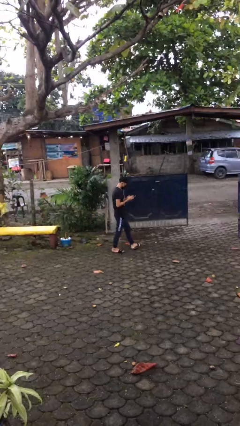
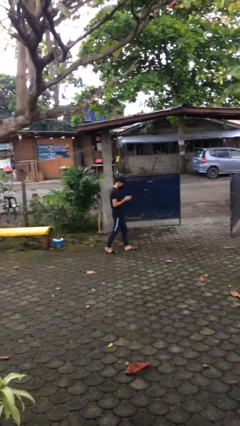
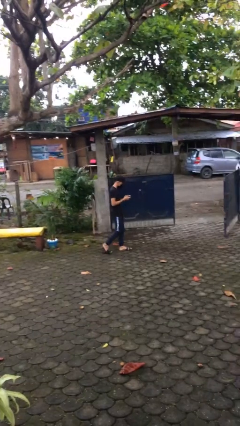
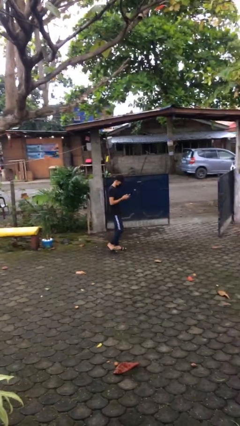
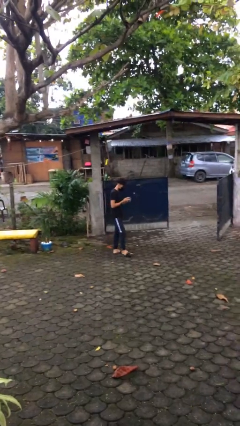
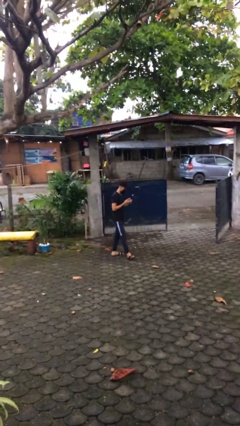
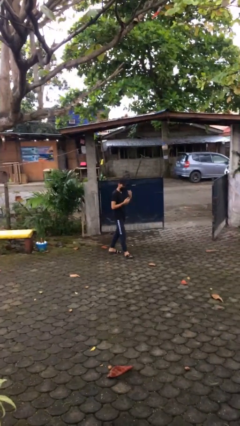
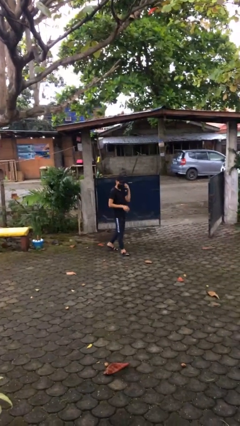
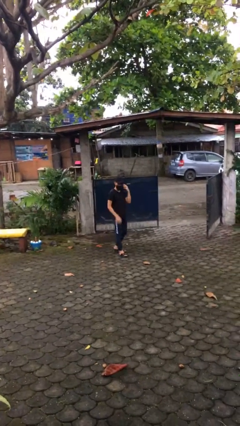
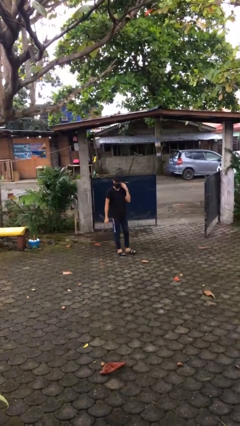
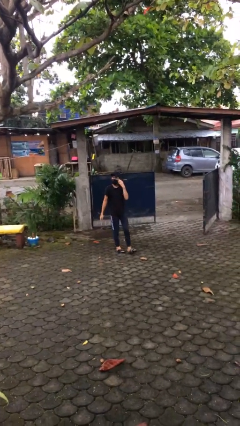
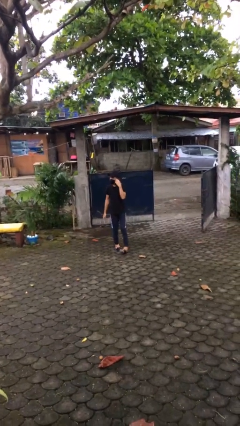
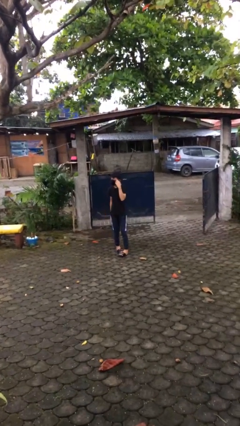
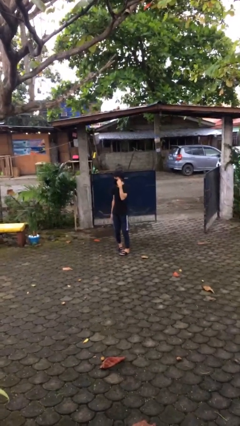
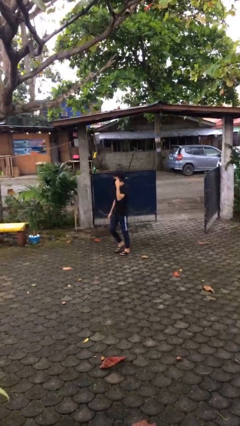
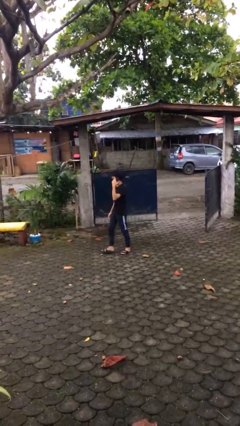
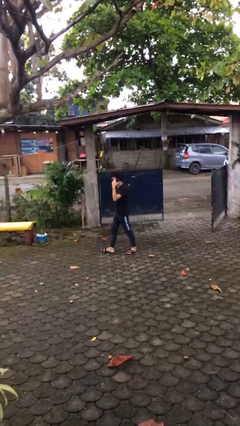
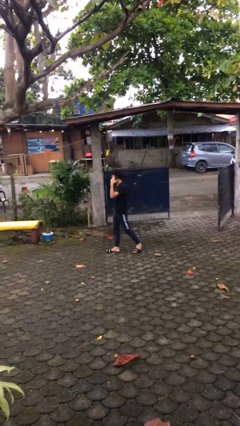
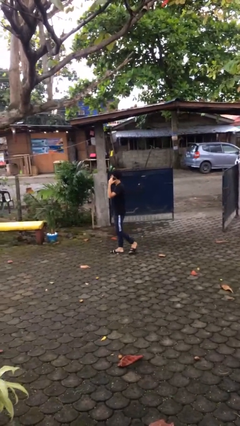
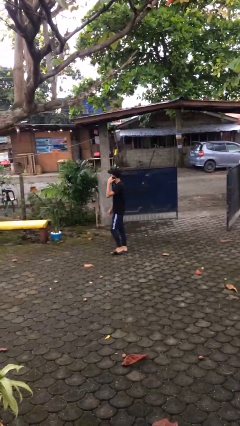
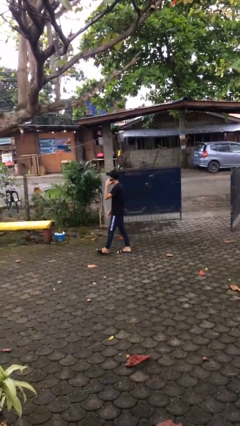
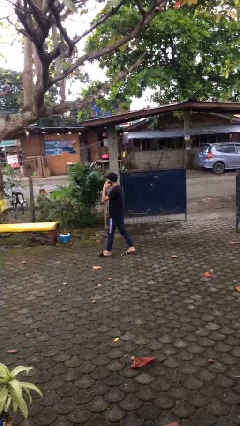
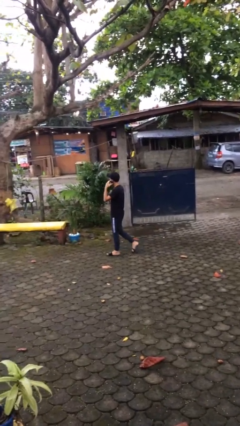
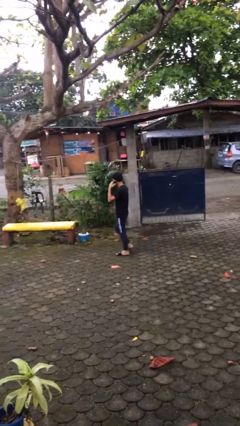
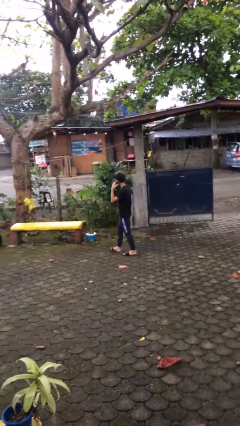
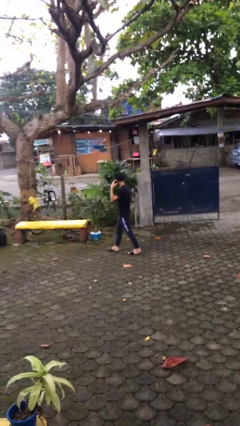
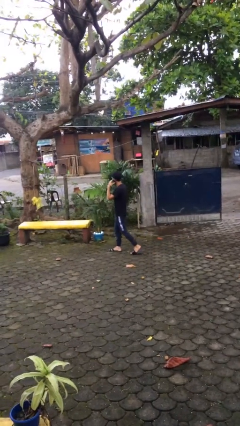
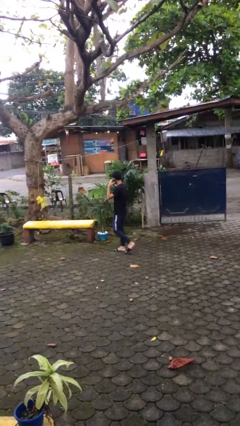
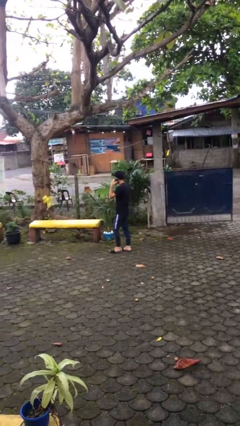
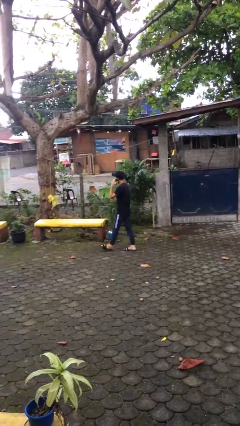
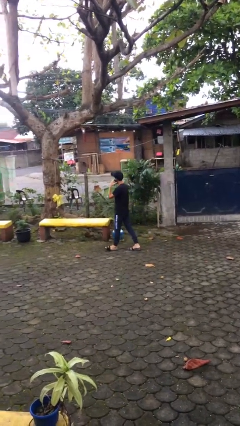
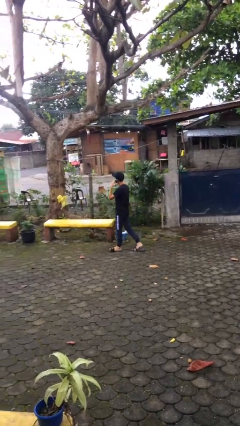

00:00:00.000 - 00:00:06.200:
person talks on phone

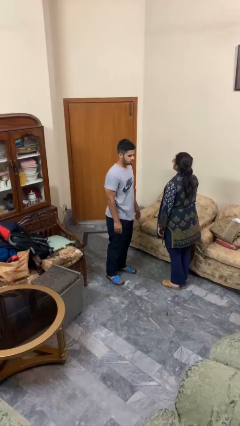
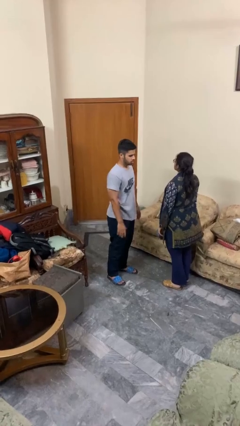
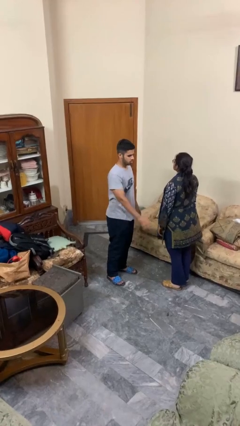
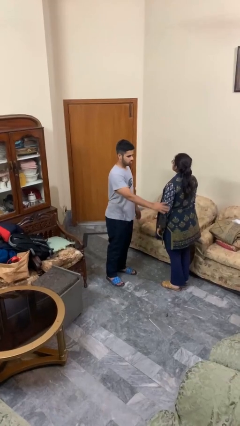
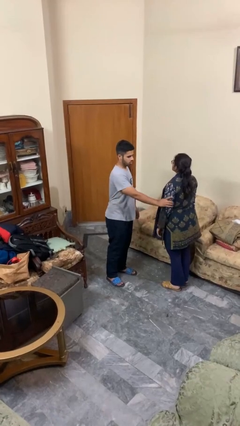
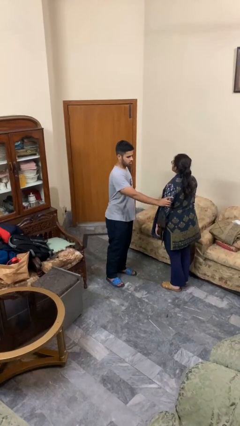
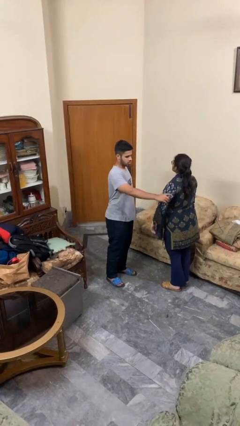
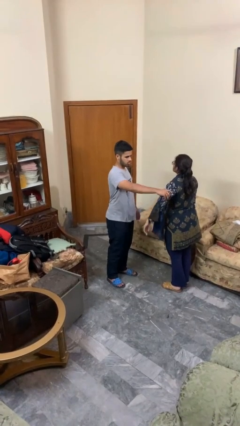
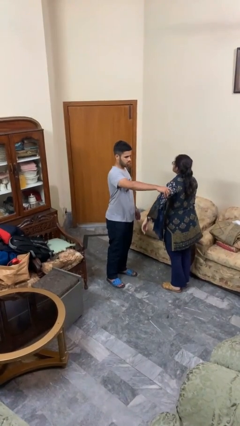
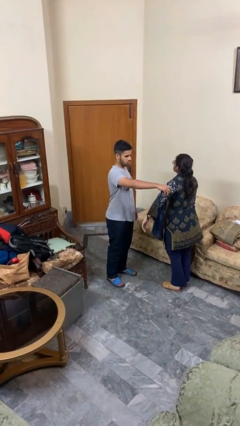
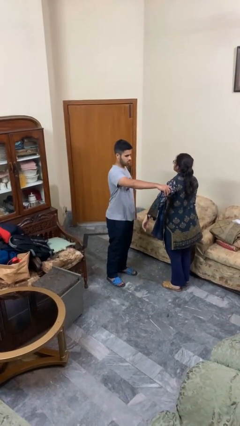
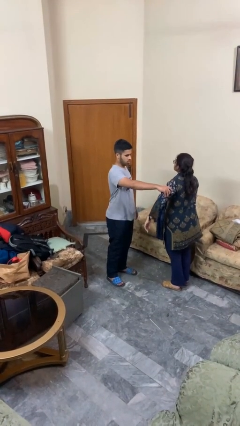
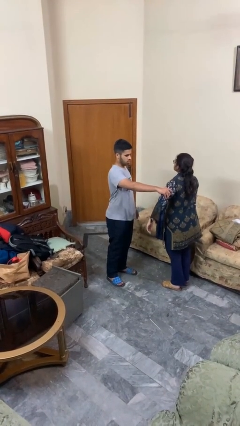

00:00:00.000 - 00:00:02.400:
person grabs person by bicep

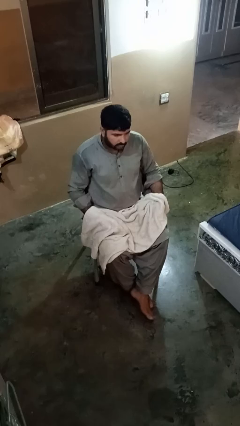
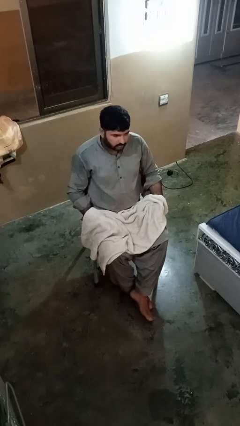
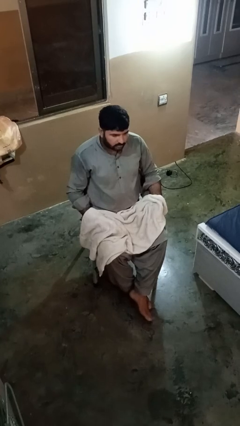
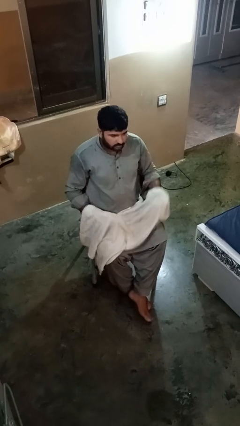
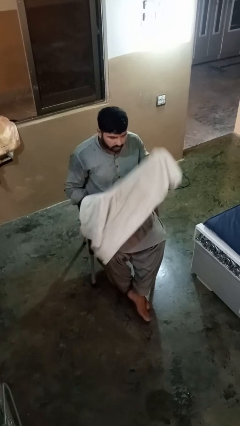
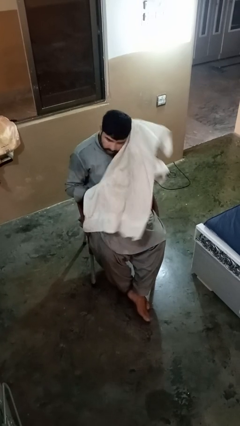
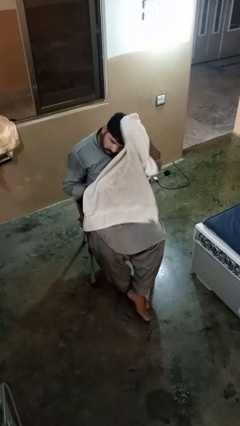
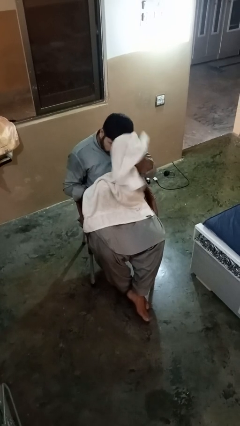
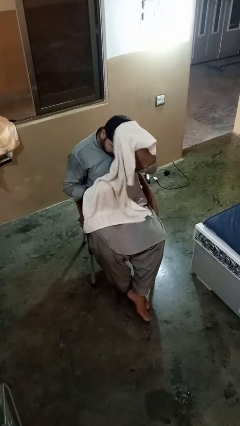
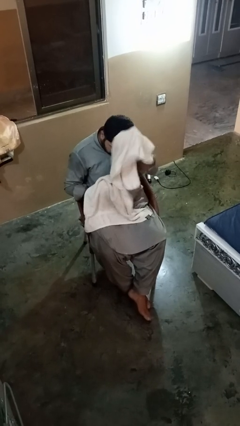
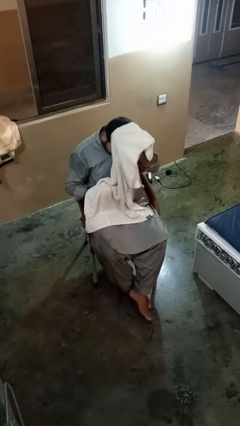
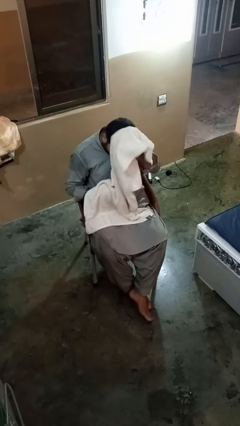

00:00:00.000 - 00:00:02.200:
person dries hair with towel

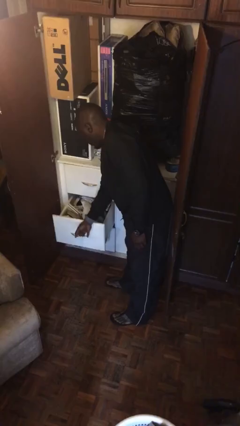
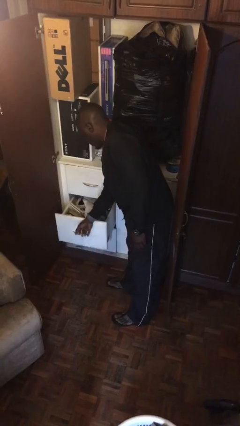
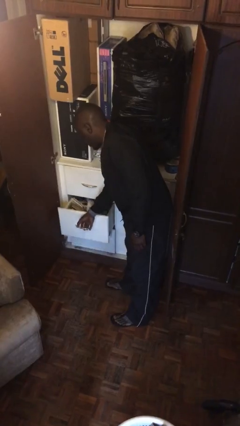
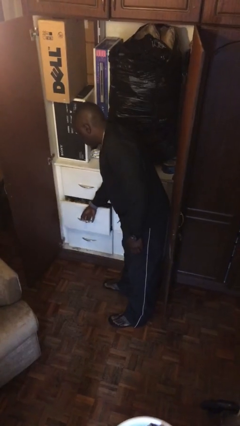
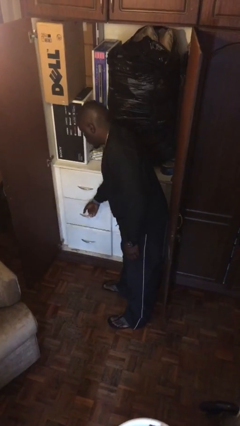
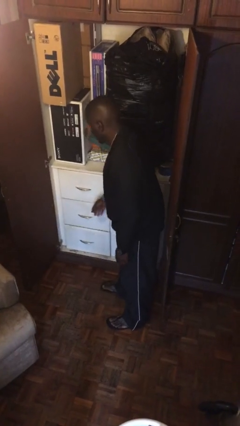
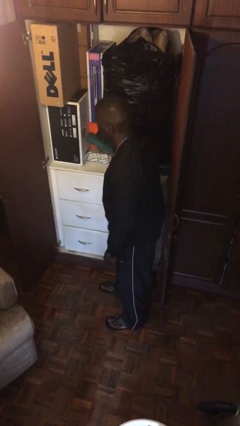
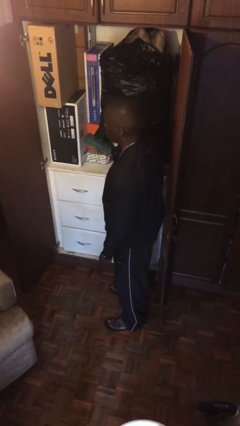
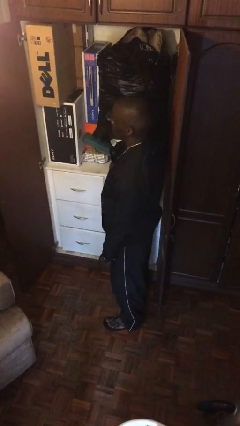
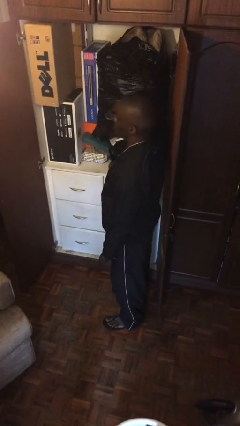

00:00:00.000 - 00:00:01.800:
person closes dresser drawer

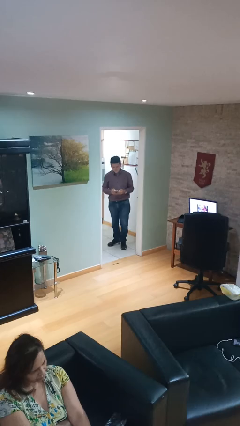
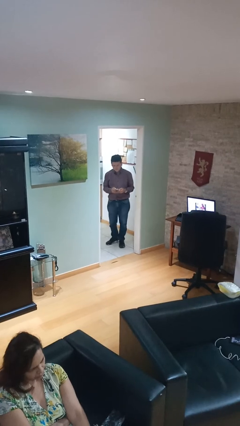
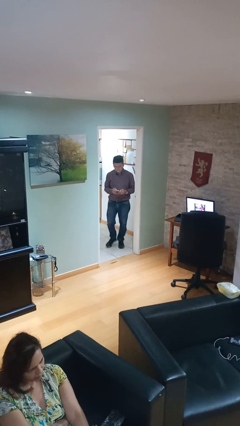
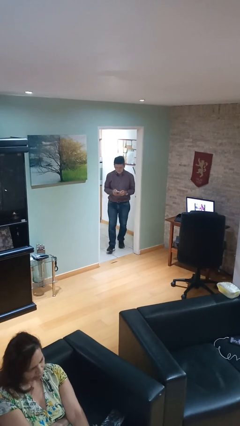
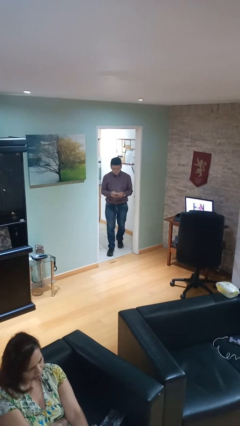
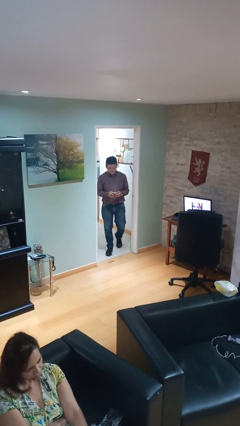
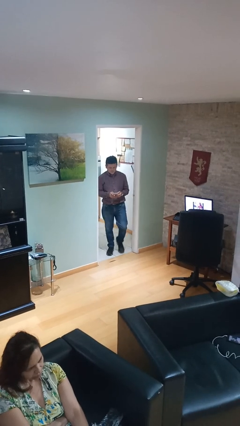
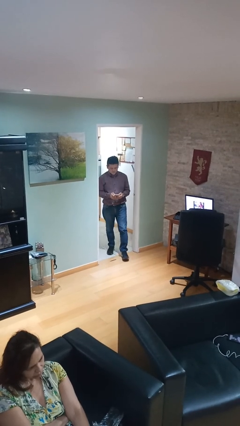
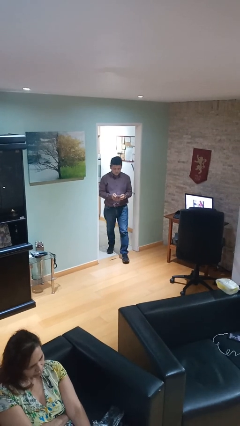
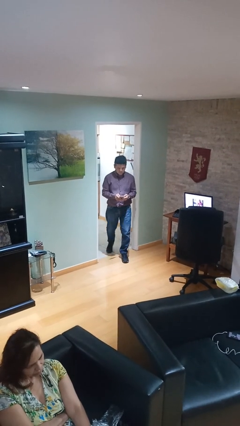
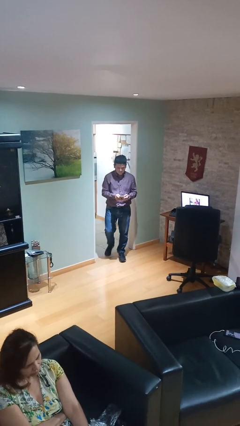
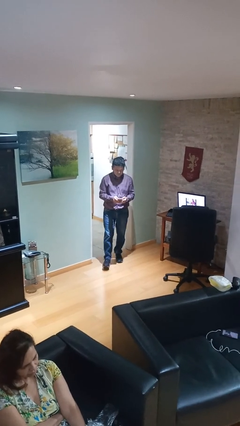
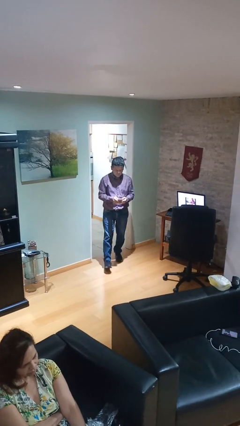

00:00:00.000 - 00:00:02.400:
person enters scene through structure

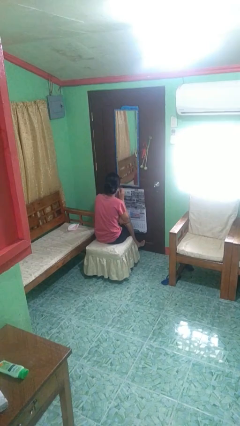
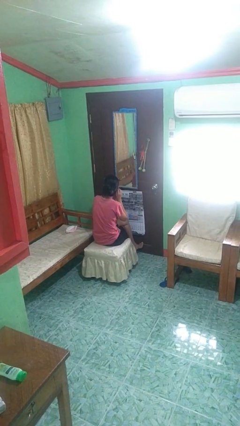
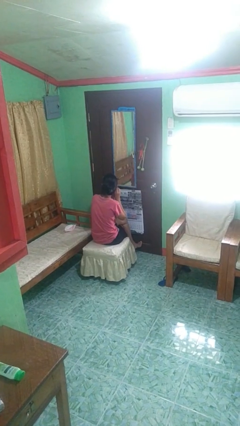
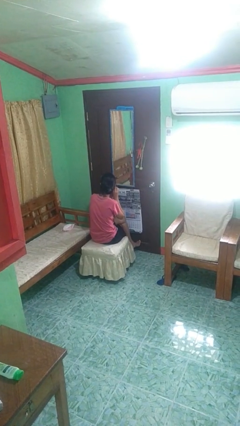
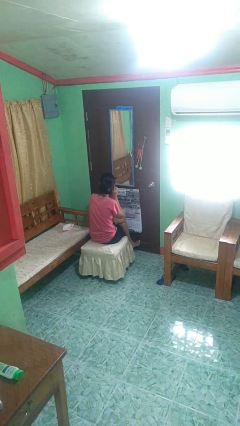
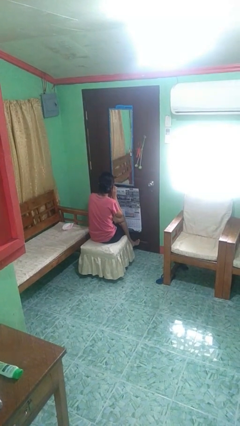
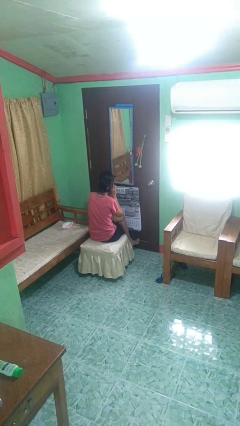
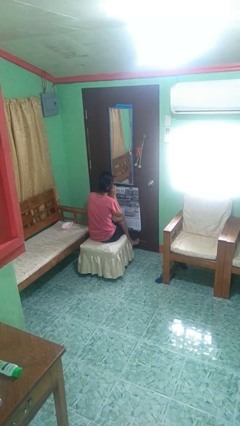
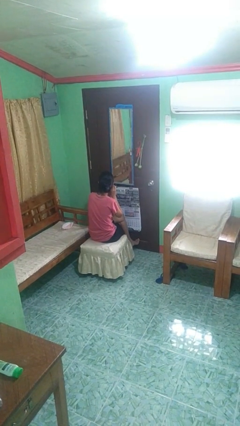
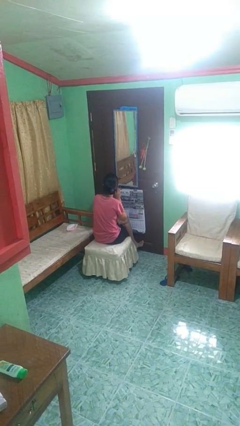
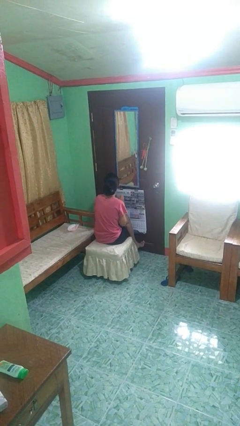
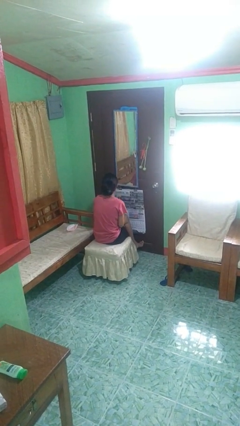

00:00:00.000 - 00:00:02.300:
person puts on earrings
